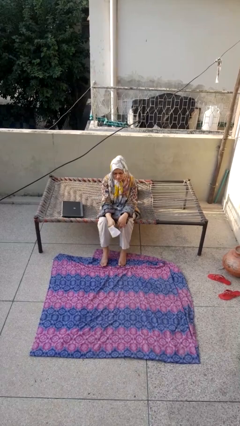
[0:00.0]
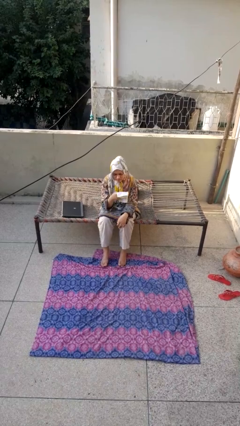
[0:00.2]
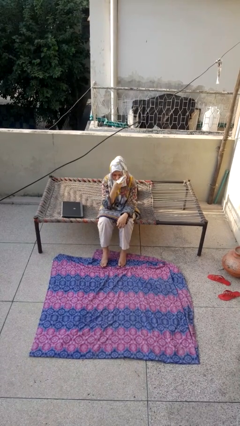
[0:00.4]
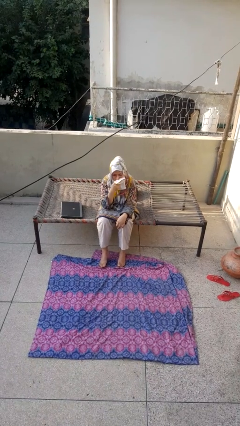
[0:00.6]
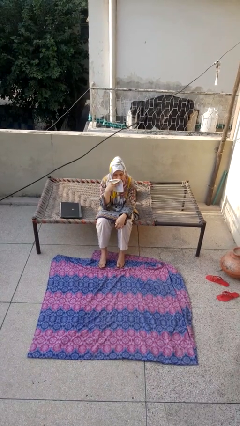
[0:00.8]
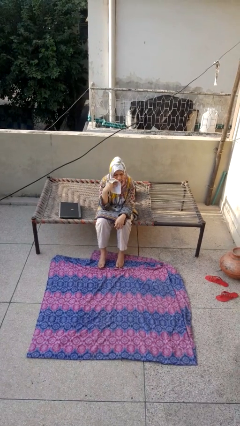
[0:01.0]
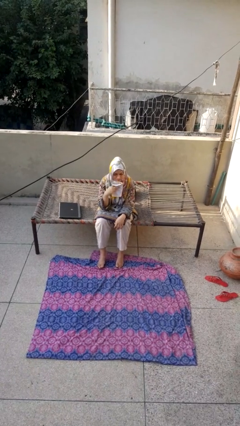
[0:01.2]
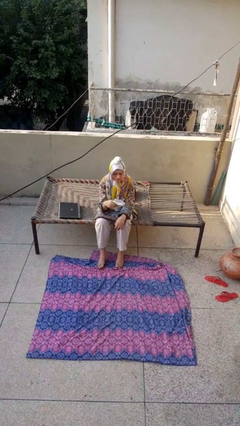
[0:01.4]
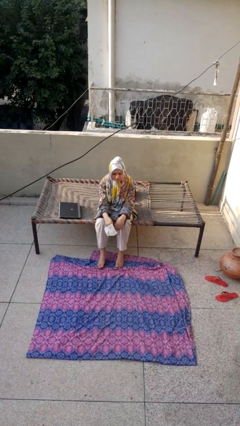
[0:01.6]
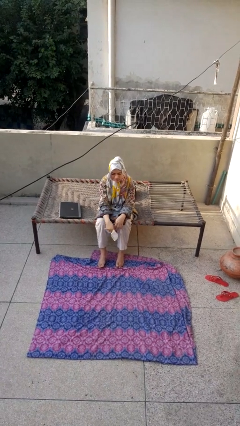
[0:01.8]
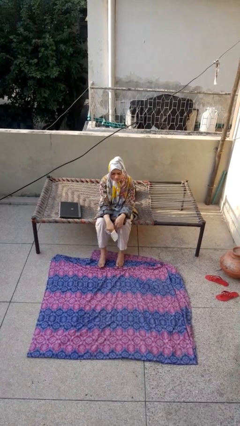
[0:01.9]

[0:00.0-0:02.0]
person wipes mouth with napkin

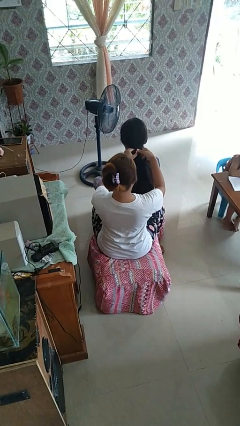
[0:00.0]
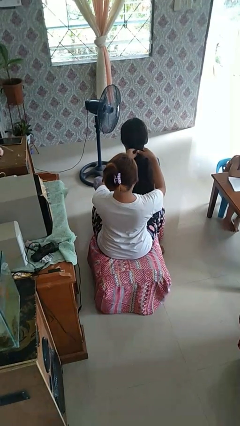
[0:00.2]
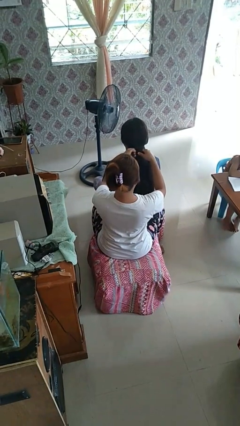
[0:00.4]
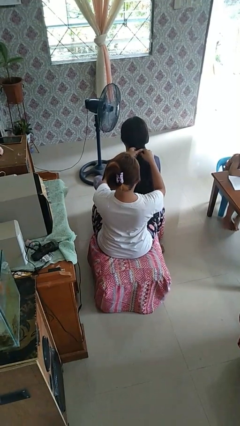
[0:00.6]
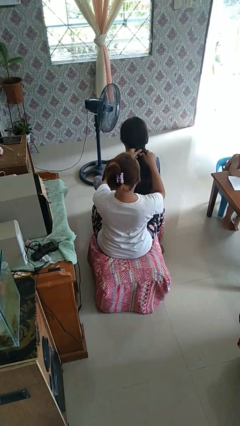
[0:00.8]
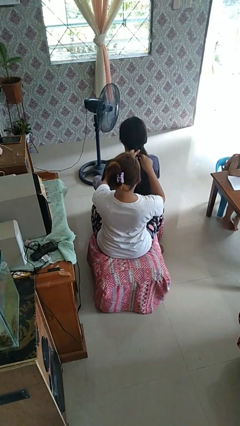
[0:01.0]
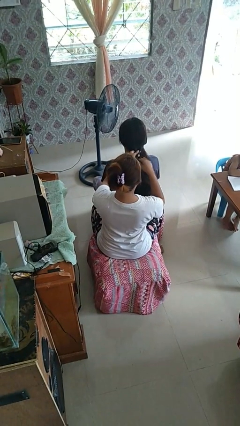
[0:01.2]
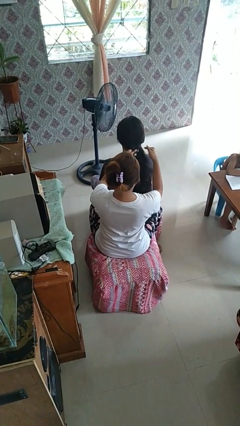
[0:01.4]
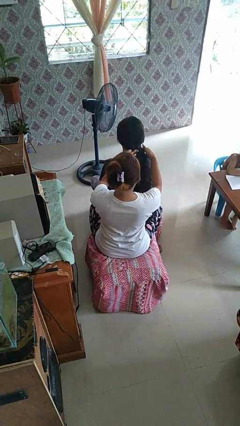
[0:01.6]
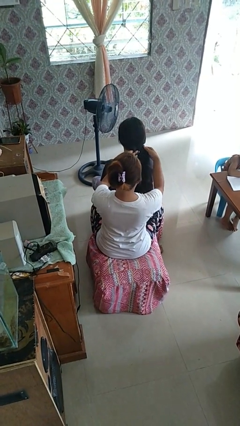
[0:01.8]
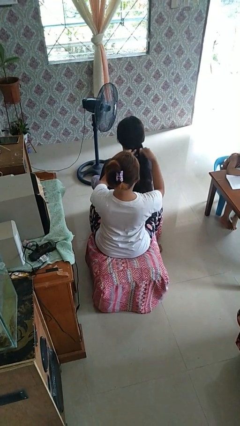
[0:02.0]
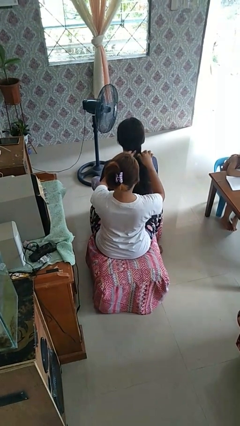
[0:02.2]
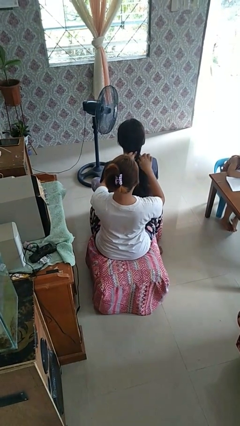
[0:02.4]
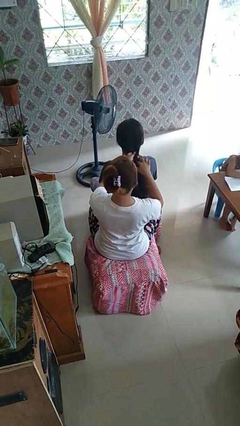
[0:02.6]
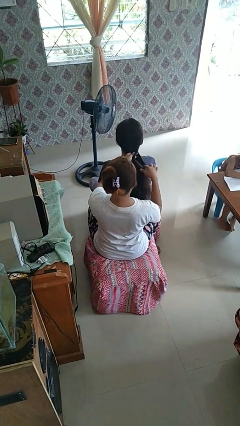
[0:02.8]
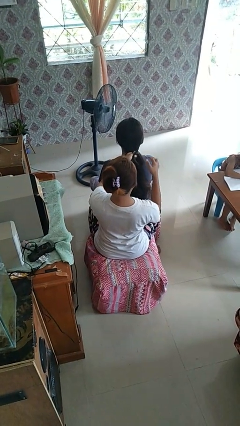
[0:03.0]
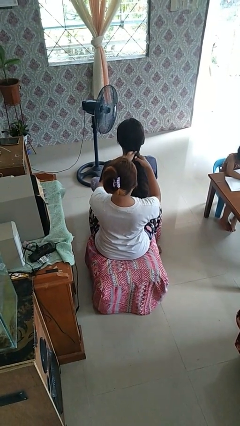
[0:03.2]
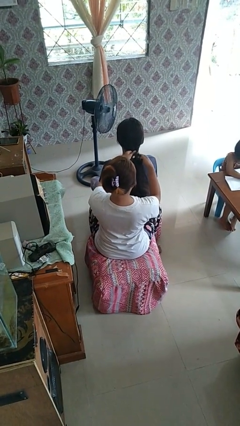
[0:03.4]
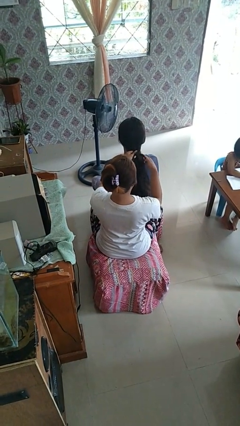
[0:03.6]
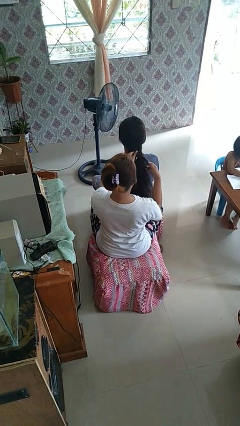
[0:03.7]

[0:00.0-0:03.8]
person braids hair of person

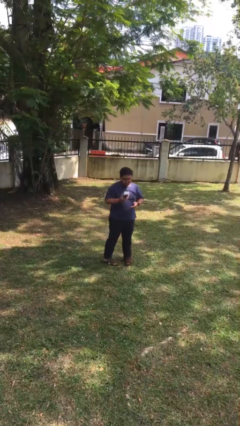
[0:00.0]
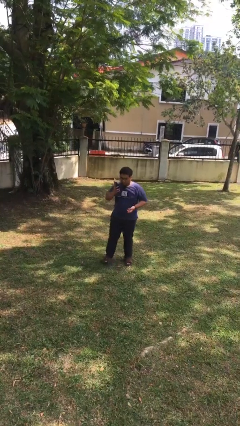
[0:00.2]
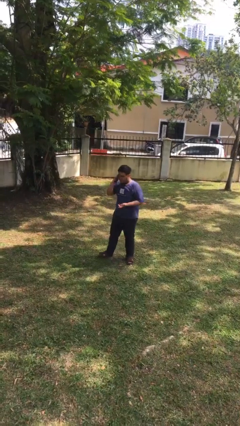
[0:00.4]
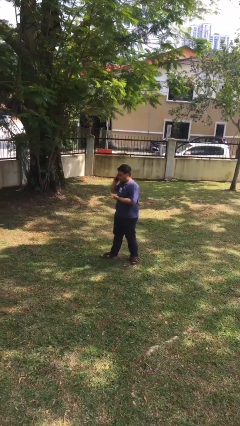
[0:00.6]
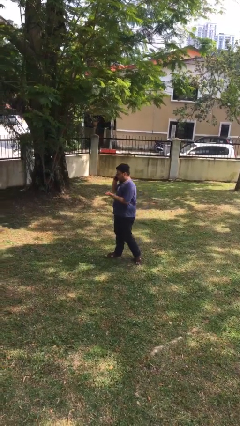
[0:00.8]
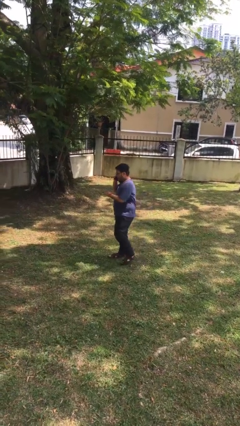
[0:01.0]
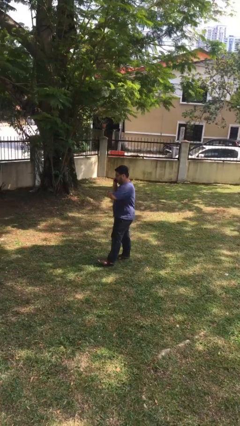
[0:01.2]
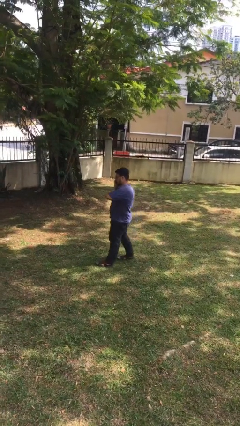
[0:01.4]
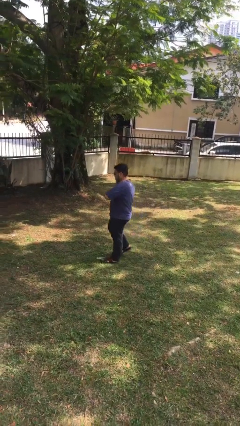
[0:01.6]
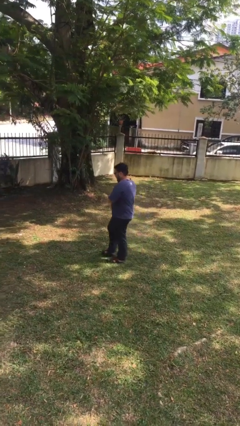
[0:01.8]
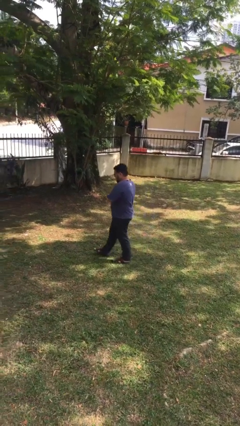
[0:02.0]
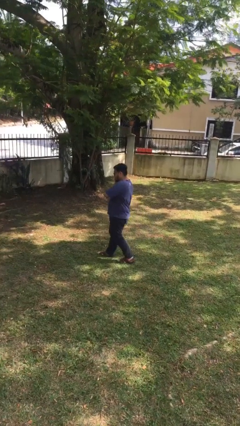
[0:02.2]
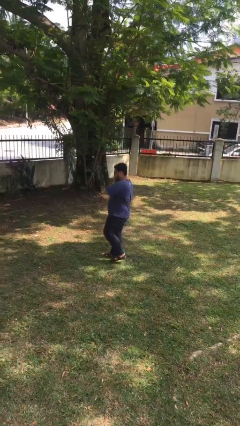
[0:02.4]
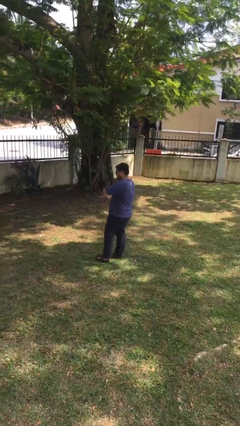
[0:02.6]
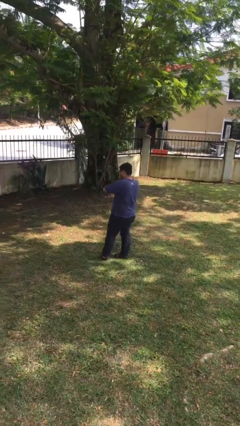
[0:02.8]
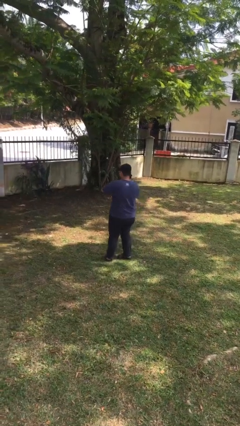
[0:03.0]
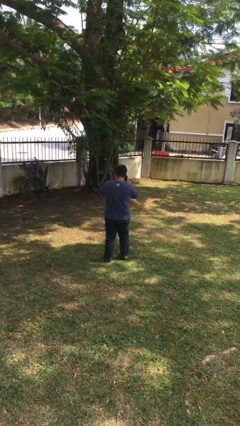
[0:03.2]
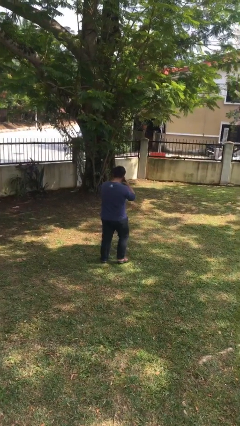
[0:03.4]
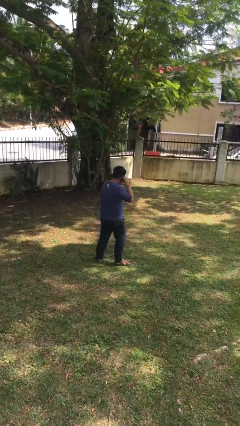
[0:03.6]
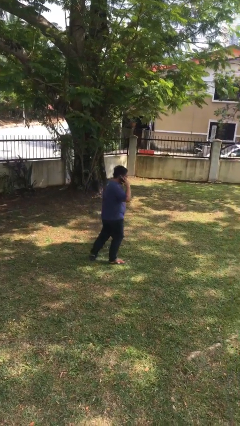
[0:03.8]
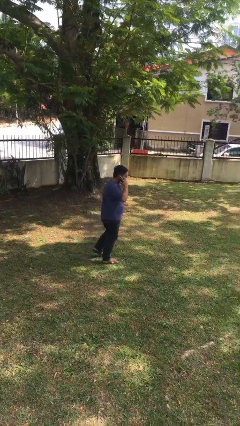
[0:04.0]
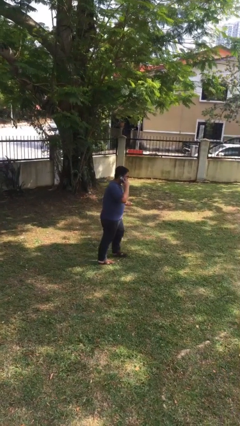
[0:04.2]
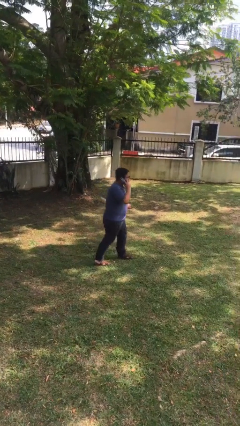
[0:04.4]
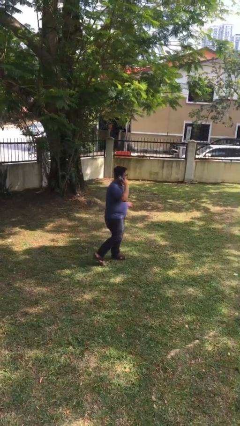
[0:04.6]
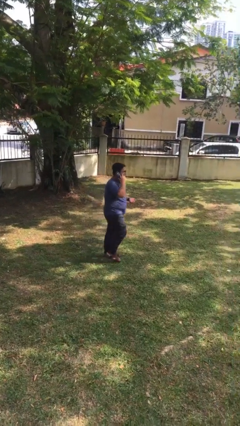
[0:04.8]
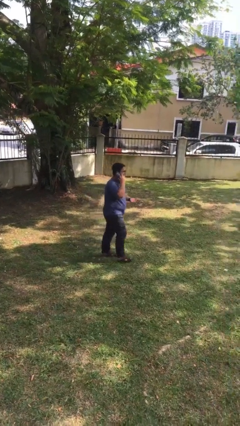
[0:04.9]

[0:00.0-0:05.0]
person talks on phone

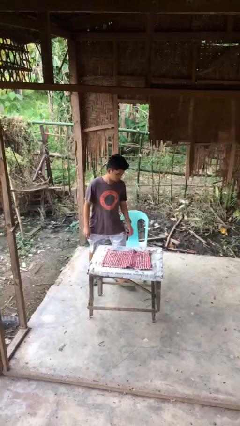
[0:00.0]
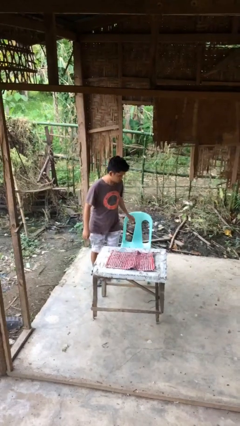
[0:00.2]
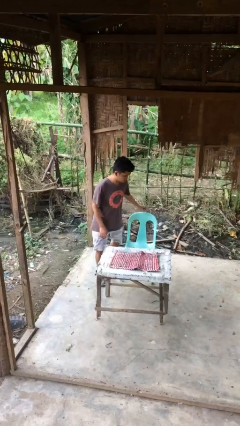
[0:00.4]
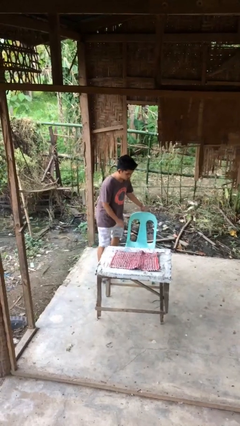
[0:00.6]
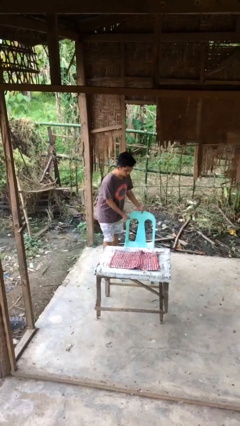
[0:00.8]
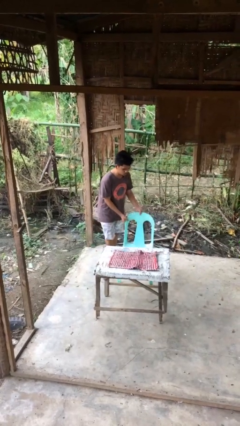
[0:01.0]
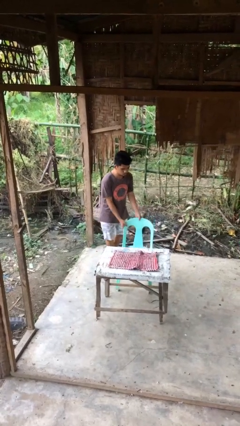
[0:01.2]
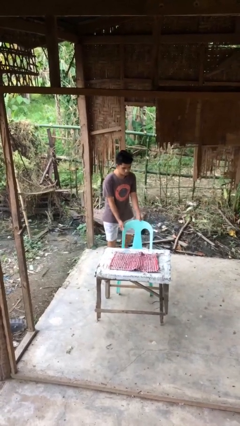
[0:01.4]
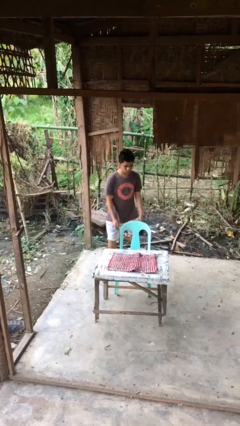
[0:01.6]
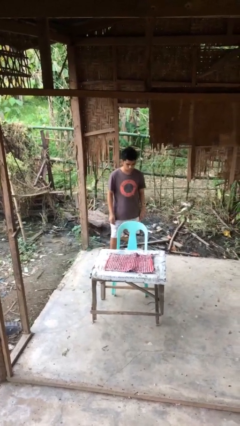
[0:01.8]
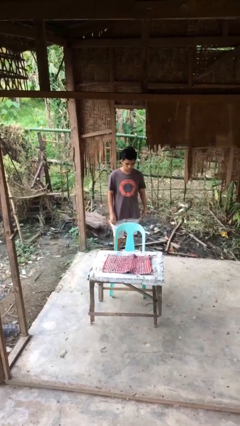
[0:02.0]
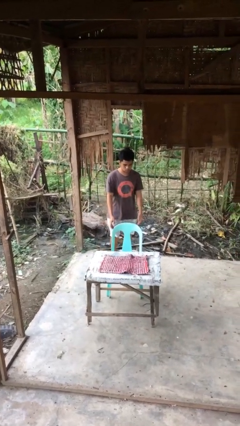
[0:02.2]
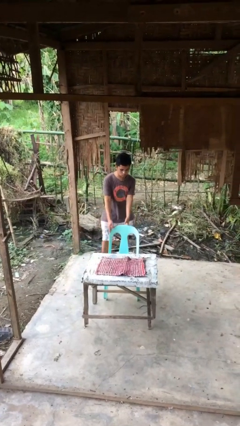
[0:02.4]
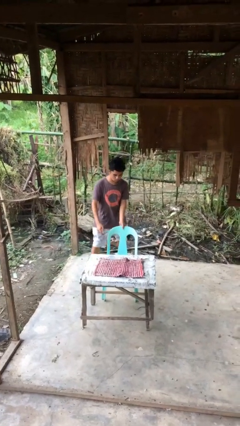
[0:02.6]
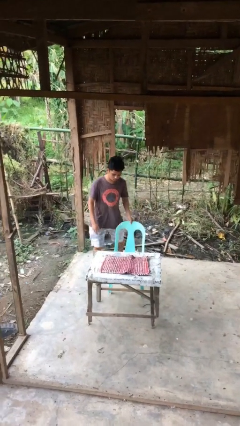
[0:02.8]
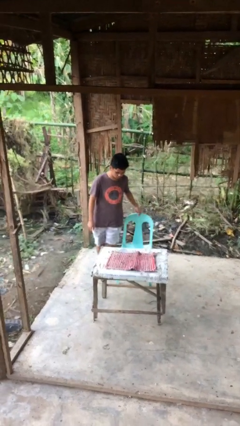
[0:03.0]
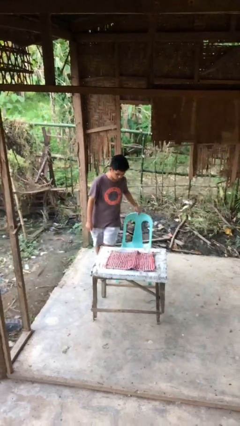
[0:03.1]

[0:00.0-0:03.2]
person stands up

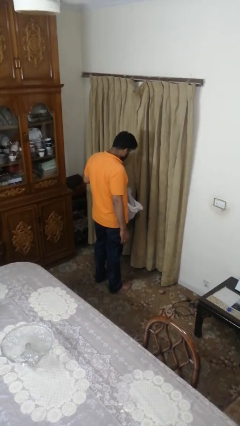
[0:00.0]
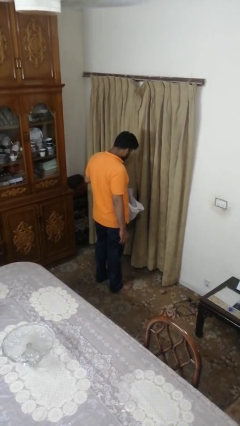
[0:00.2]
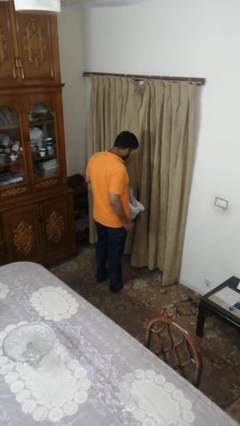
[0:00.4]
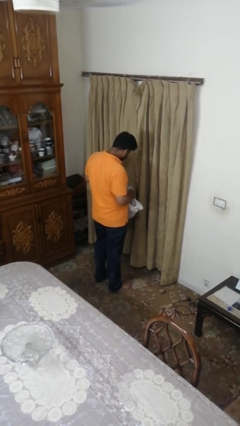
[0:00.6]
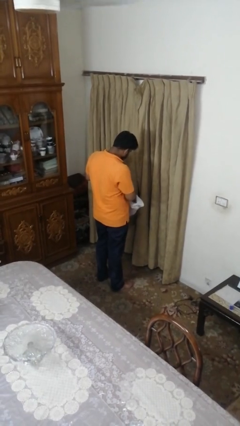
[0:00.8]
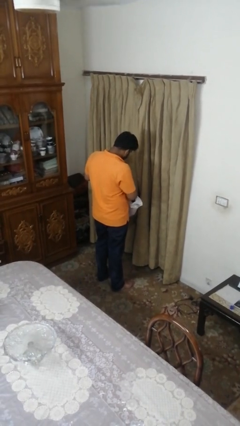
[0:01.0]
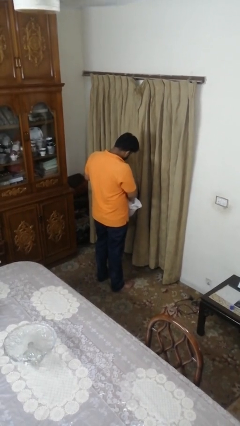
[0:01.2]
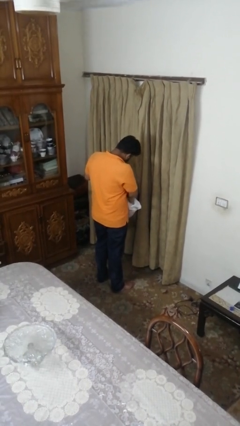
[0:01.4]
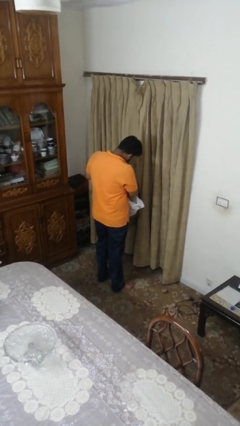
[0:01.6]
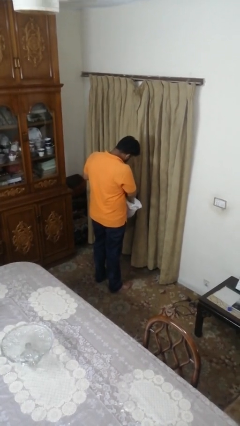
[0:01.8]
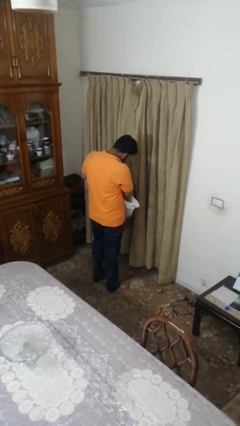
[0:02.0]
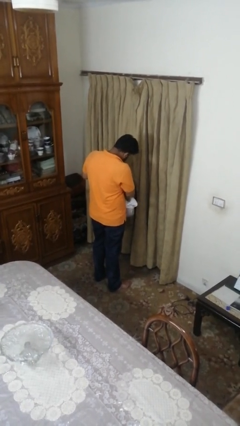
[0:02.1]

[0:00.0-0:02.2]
person searches in bag

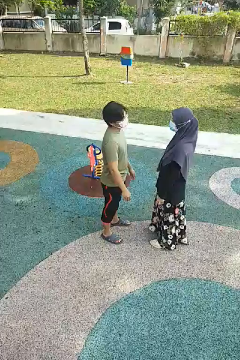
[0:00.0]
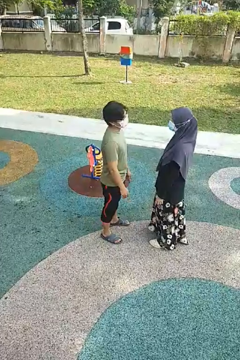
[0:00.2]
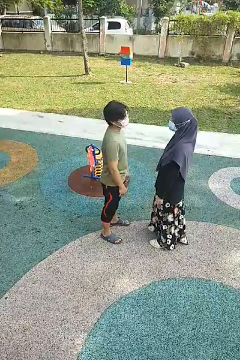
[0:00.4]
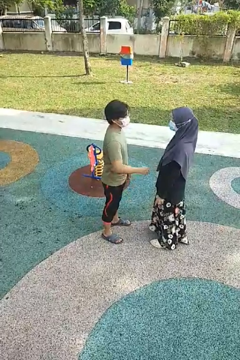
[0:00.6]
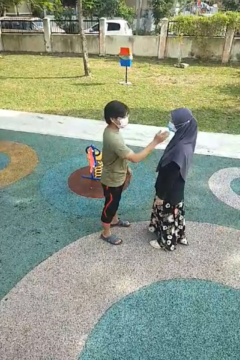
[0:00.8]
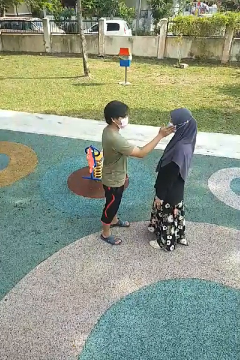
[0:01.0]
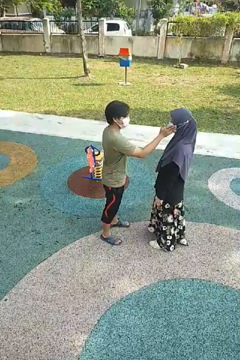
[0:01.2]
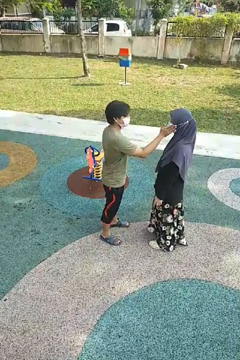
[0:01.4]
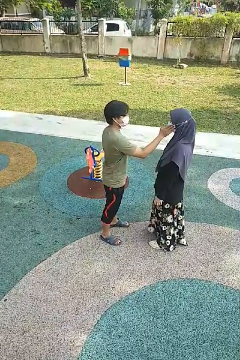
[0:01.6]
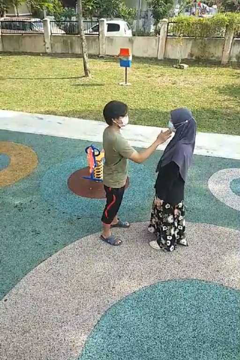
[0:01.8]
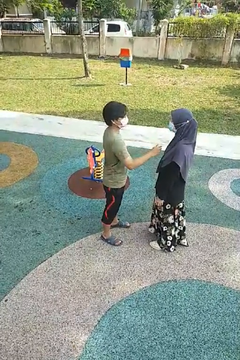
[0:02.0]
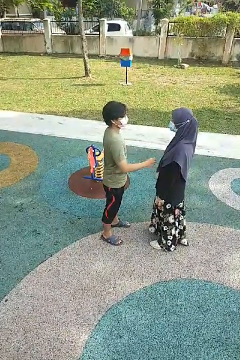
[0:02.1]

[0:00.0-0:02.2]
person touches face of person
